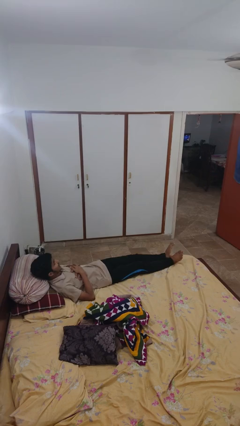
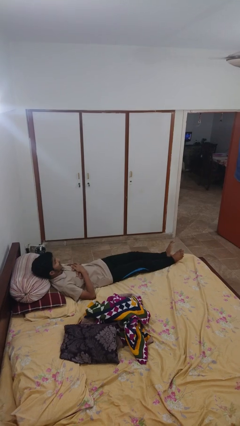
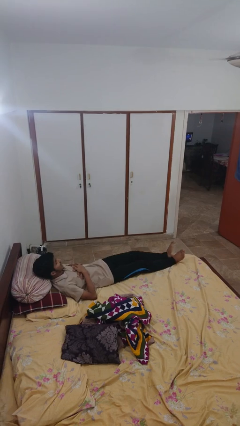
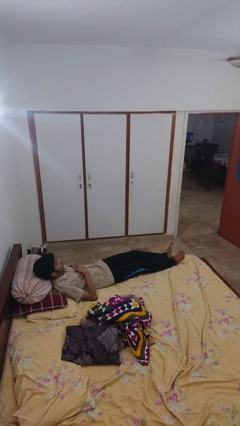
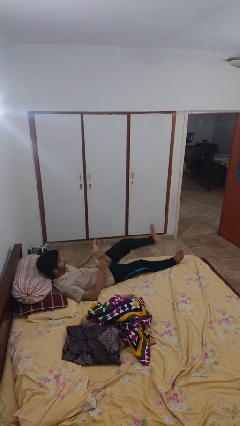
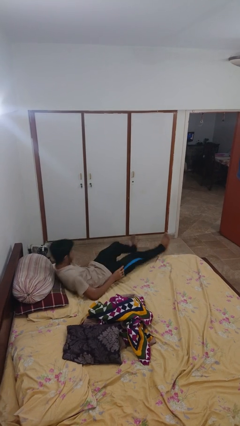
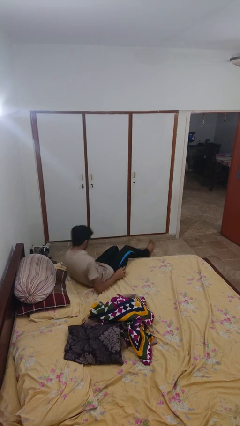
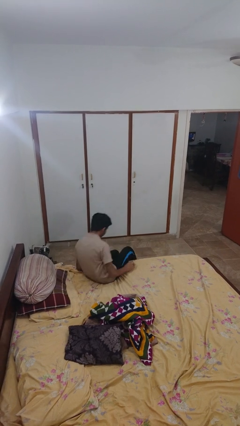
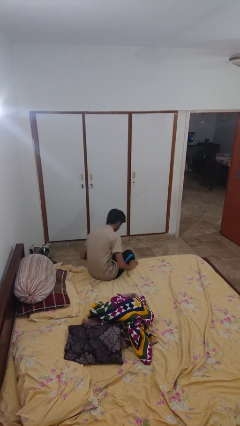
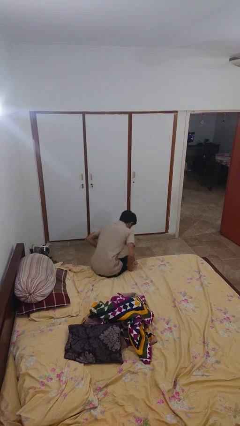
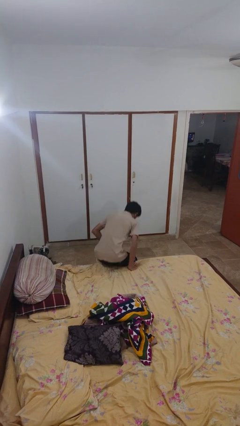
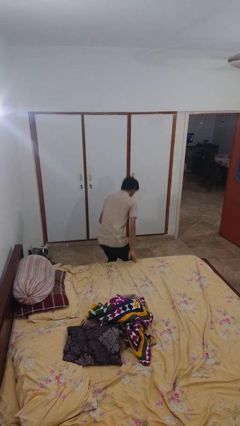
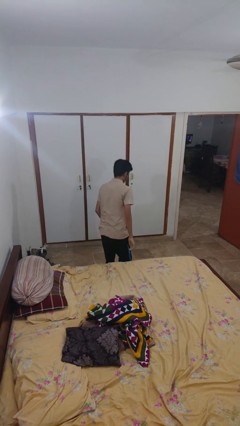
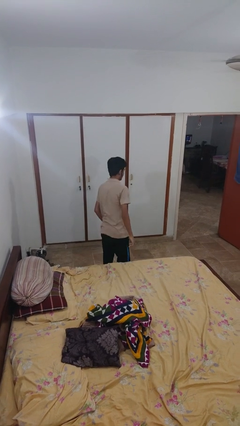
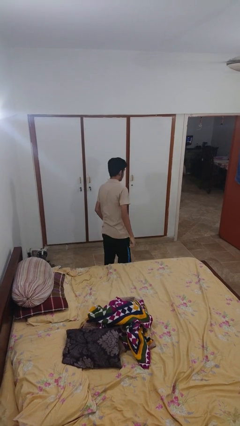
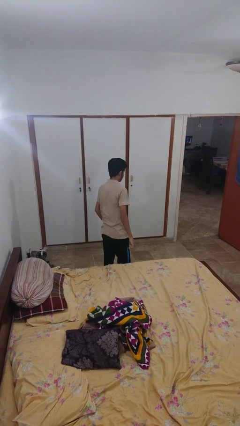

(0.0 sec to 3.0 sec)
person stands up

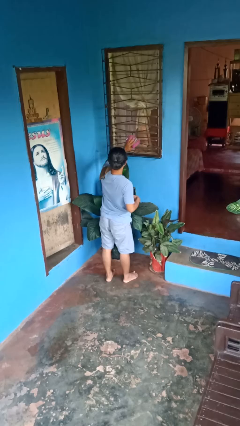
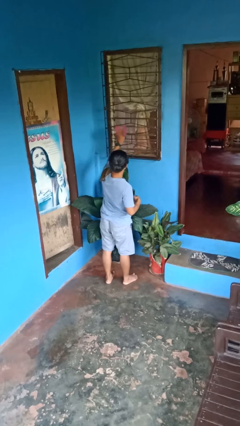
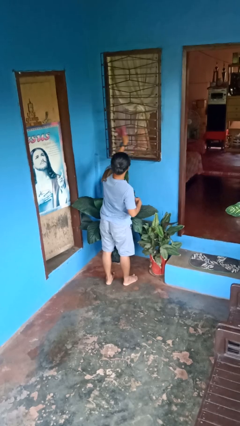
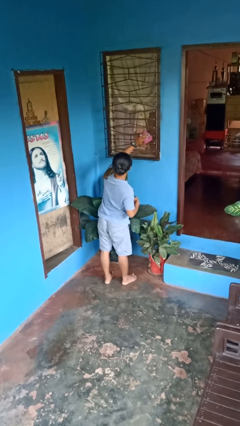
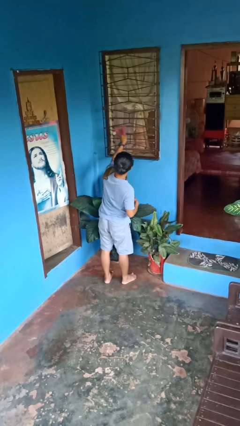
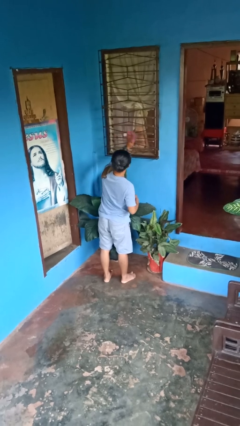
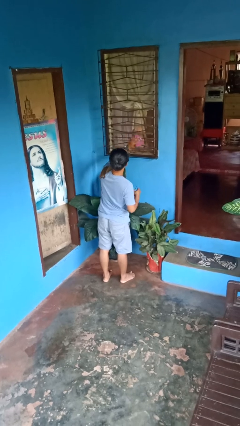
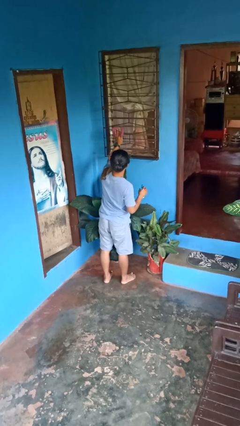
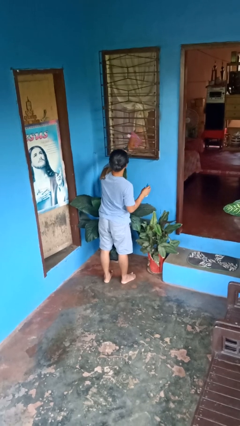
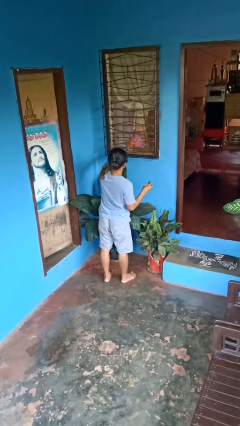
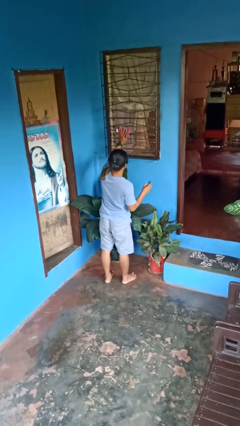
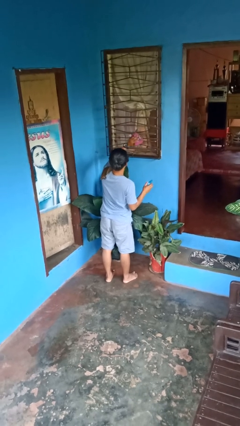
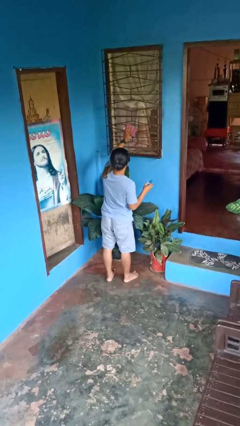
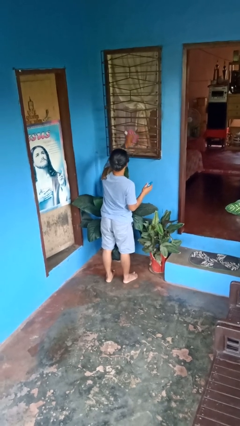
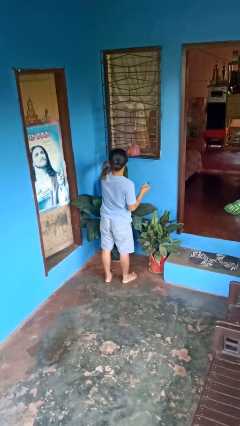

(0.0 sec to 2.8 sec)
person washes window

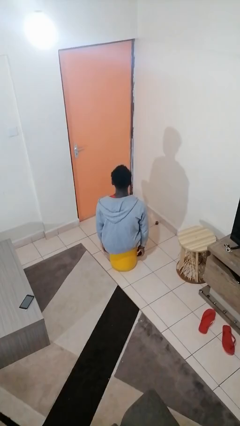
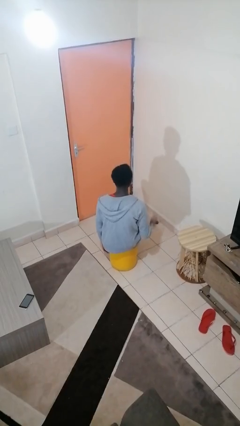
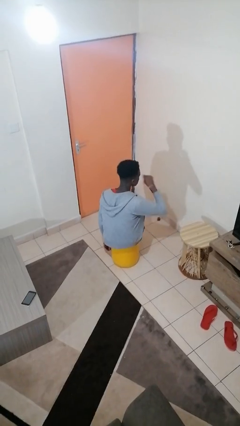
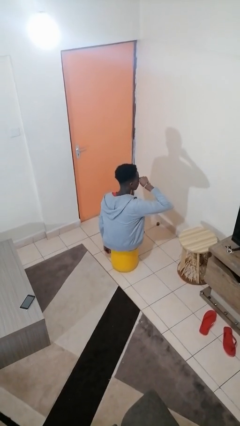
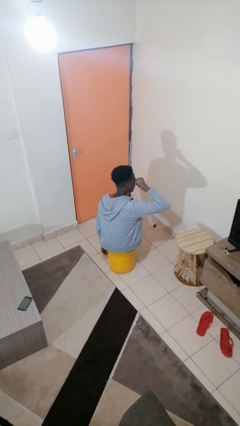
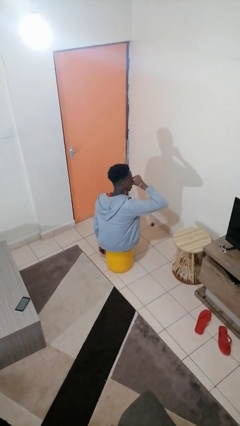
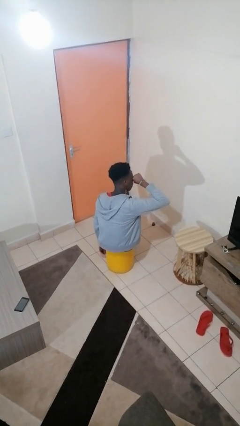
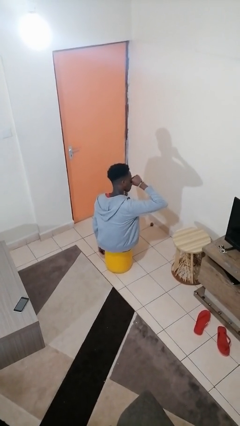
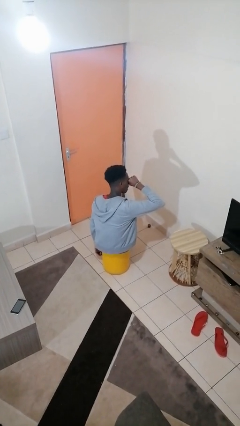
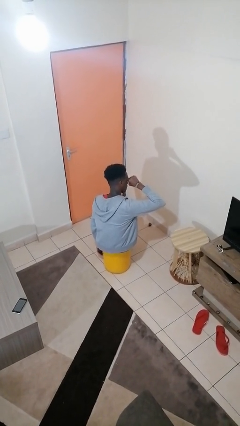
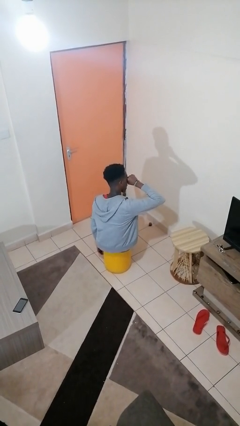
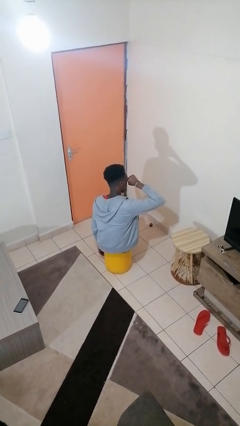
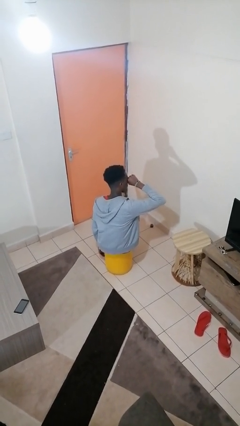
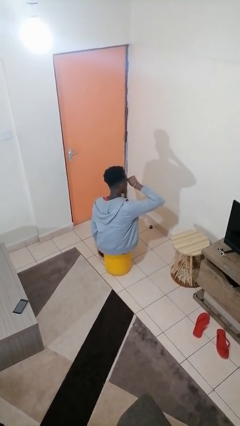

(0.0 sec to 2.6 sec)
person rubs eyes

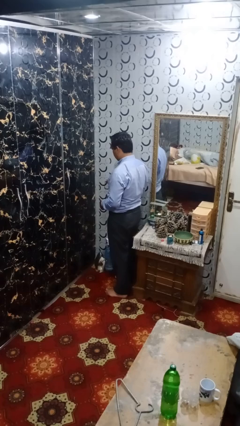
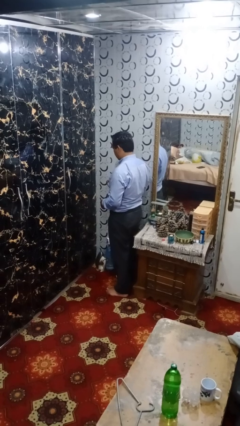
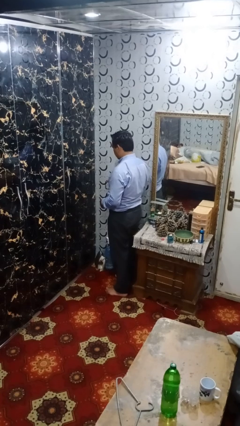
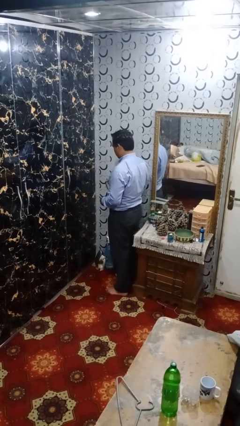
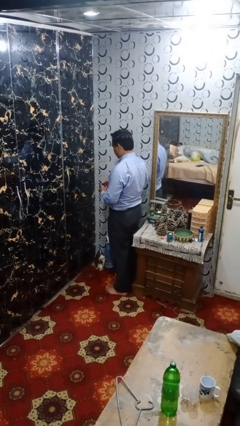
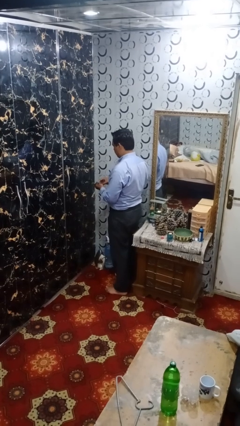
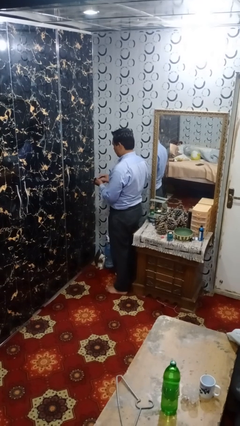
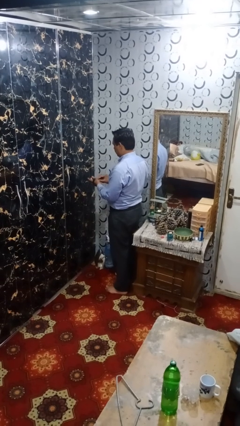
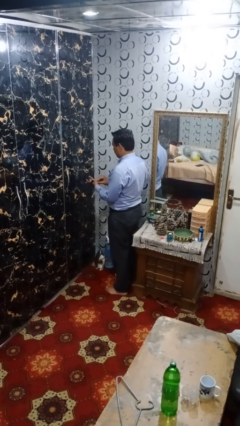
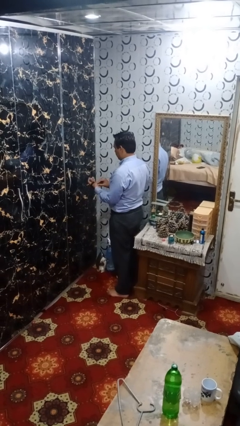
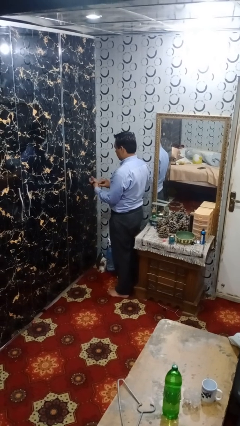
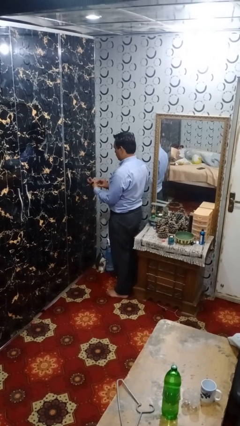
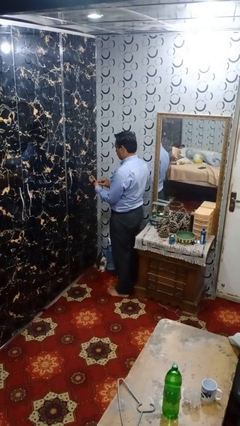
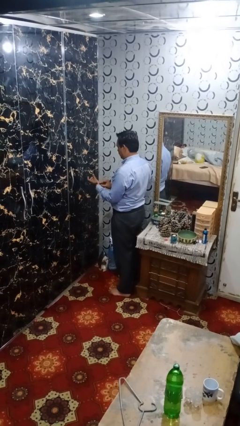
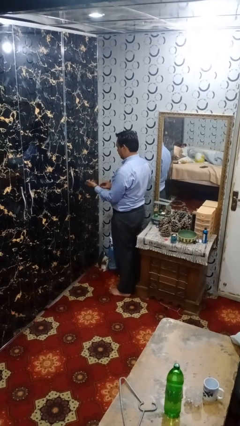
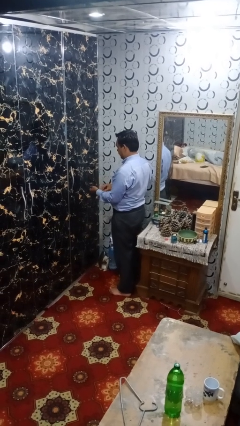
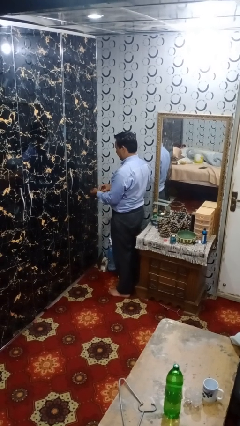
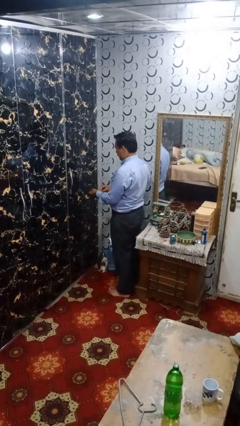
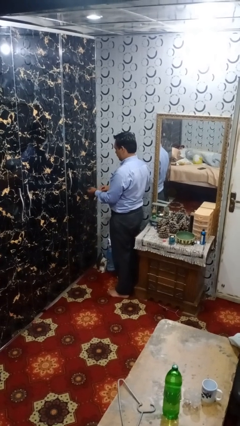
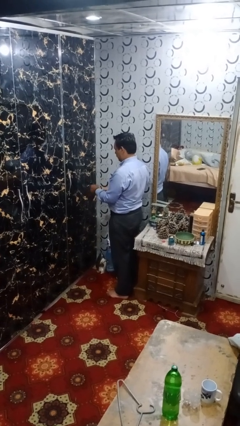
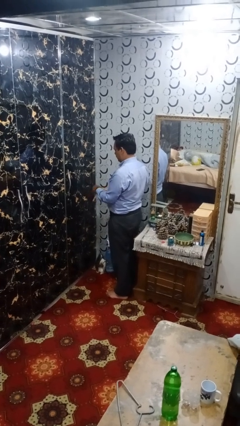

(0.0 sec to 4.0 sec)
person puts on wristwatch

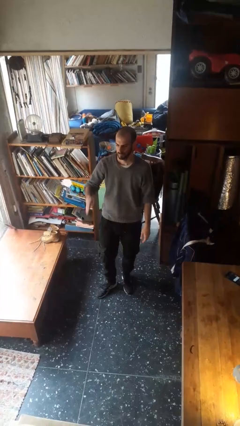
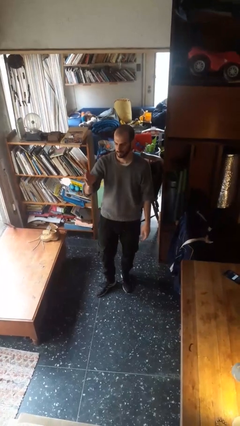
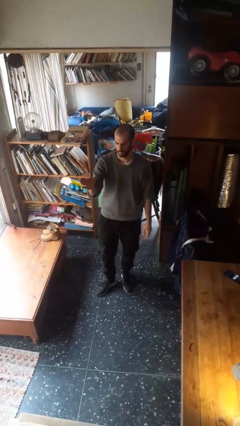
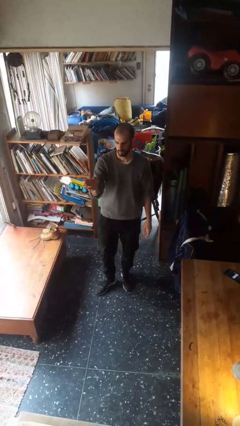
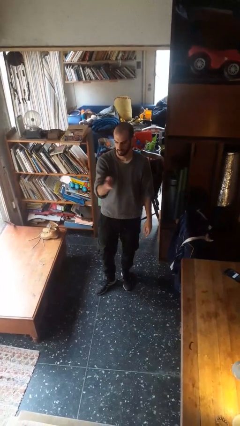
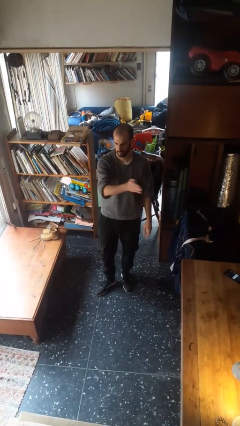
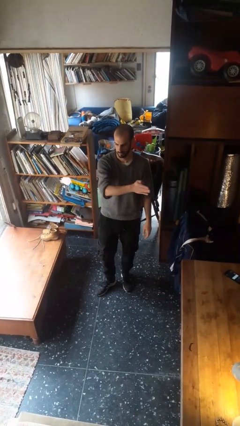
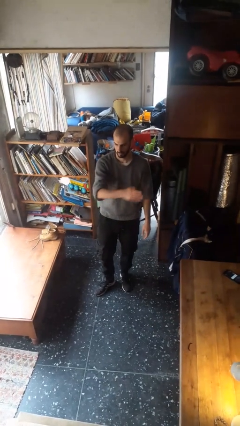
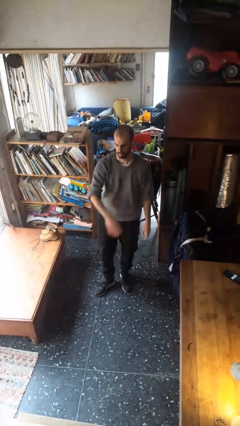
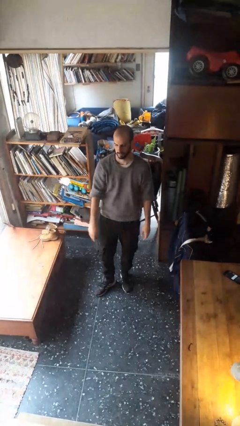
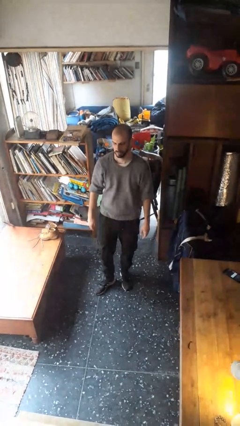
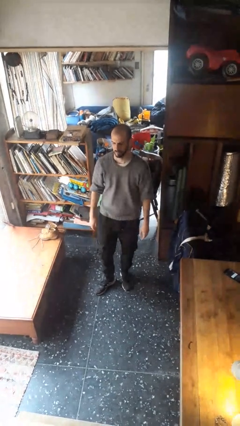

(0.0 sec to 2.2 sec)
person gestures swipe left

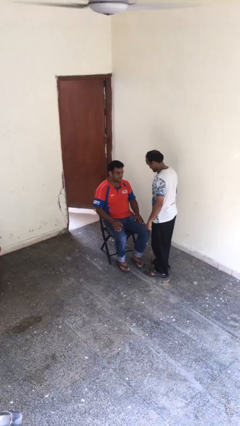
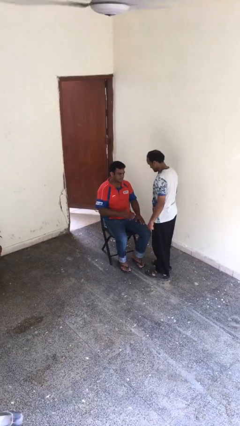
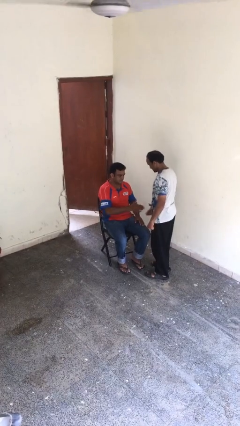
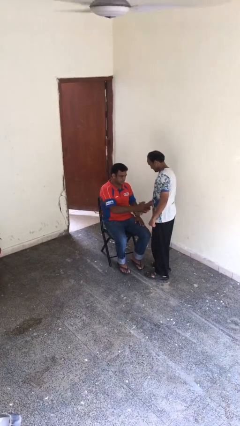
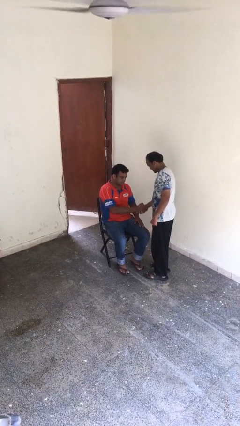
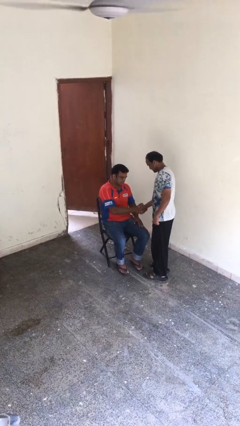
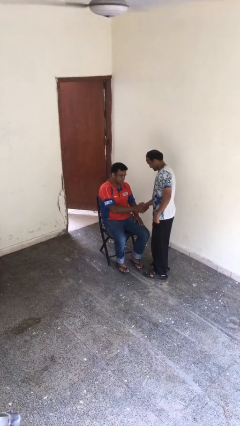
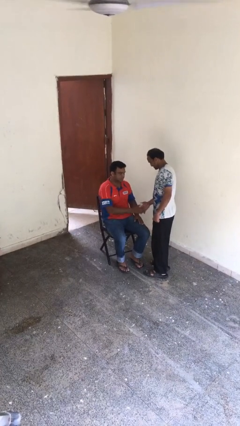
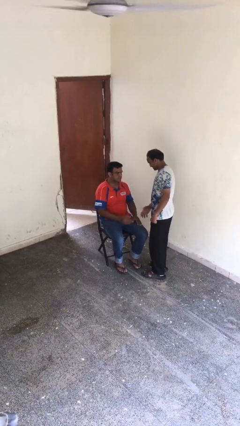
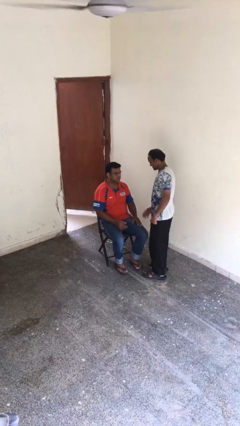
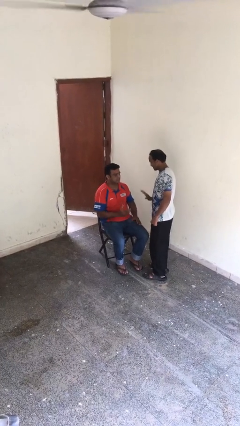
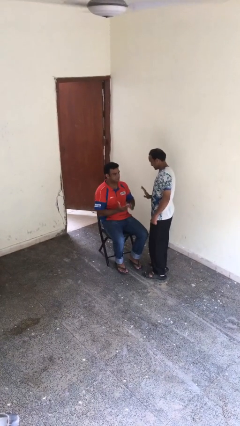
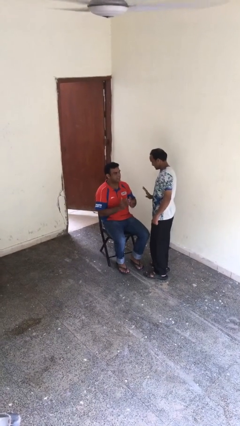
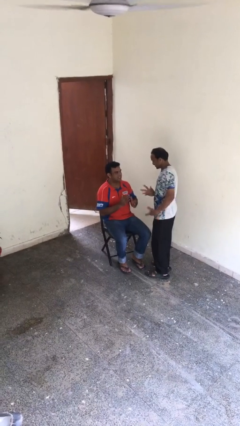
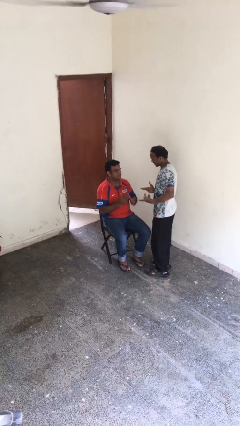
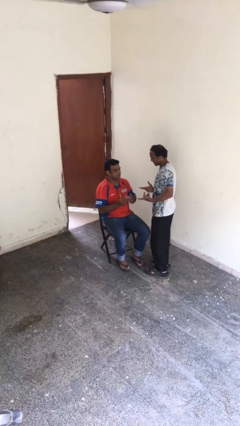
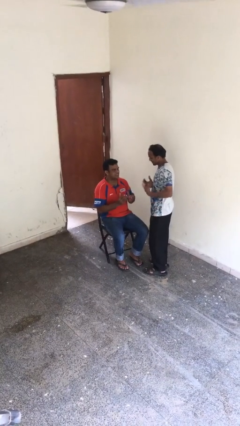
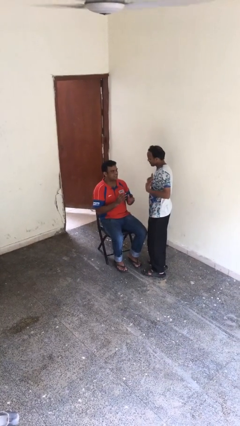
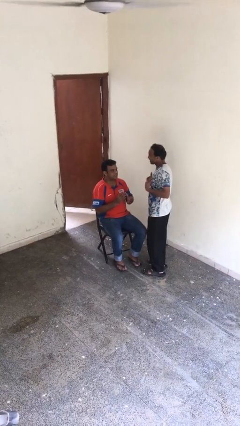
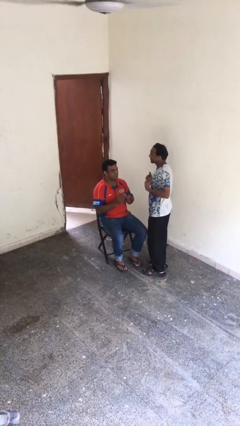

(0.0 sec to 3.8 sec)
person shakes hand
